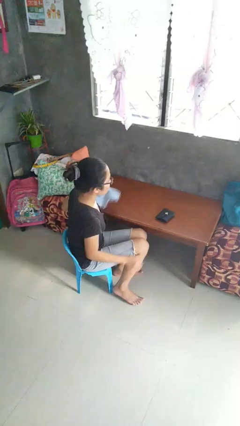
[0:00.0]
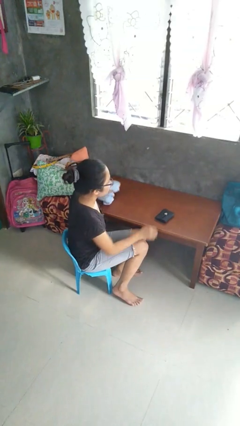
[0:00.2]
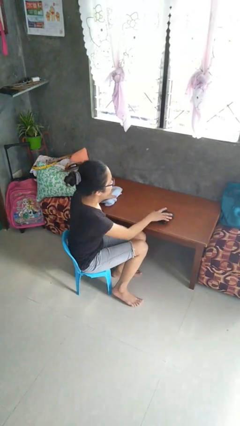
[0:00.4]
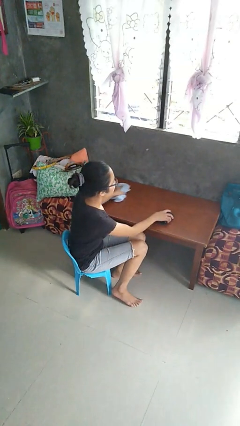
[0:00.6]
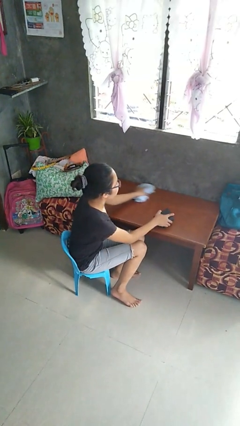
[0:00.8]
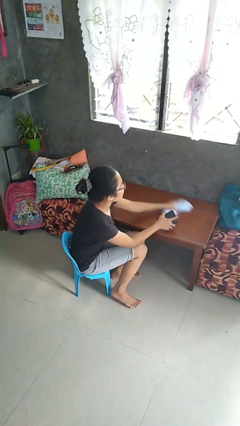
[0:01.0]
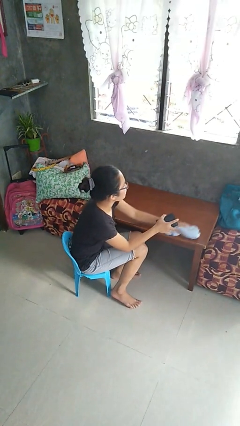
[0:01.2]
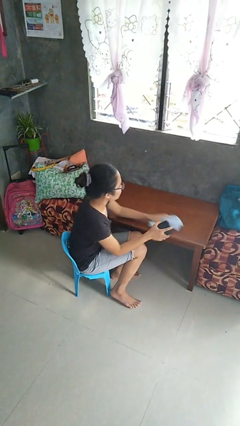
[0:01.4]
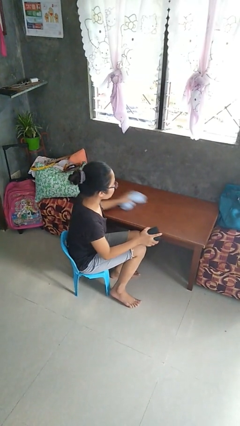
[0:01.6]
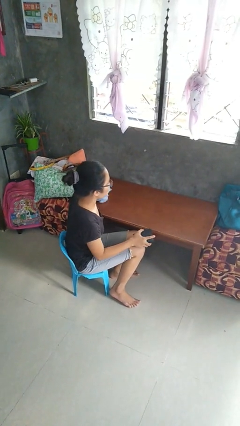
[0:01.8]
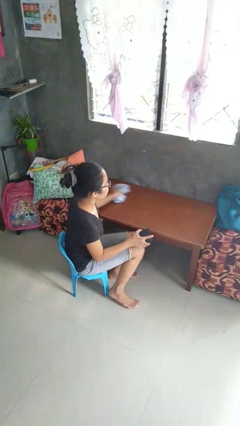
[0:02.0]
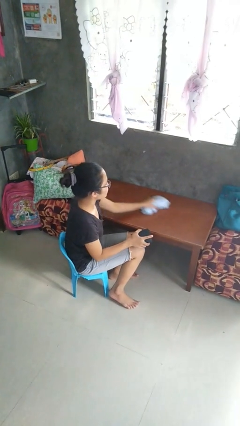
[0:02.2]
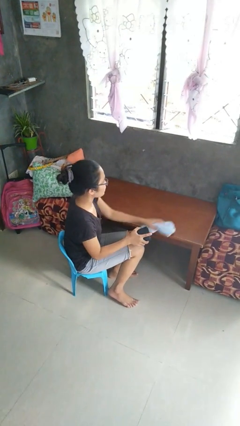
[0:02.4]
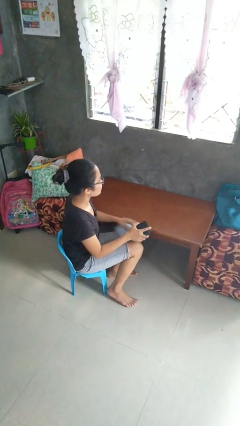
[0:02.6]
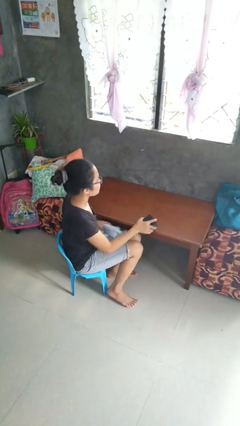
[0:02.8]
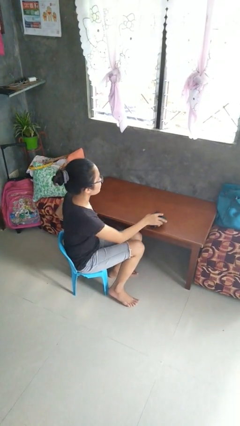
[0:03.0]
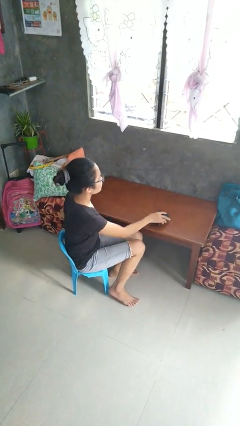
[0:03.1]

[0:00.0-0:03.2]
person cleans table with rag

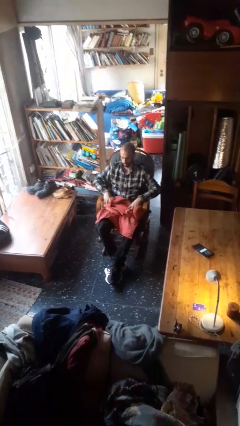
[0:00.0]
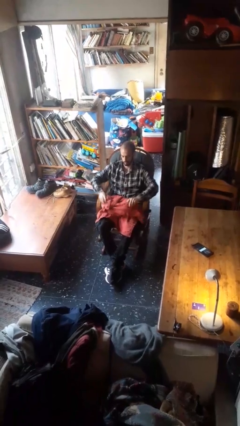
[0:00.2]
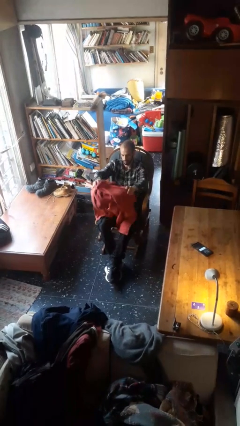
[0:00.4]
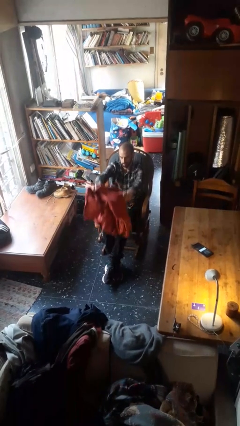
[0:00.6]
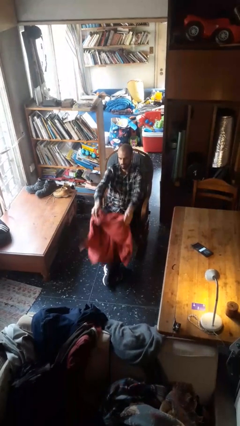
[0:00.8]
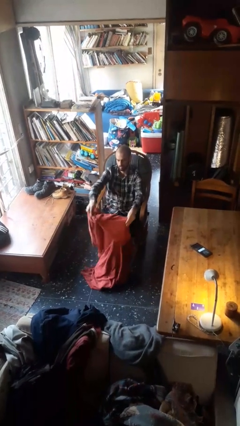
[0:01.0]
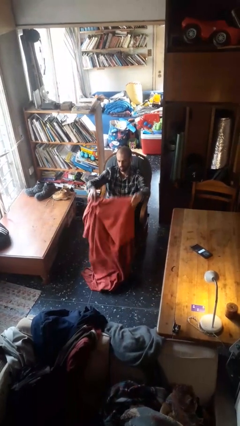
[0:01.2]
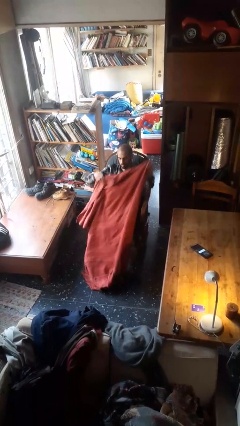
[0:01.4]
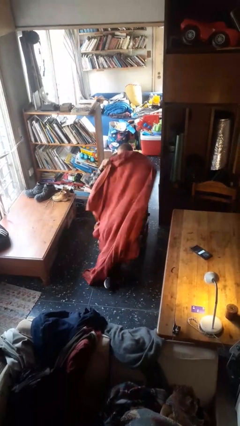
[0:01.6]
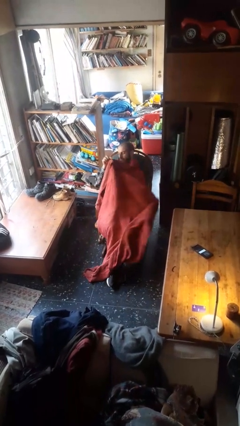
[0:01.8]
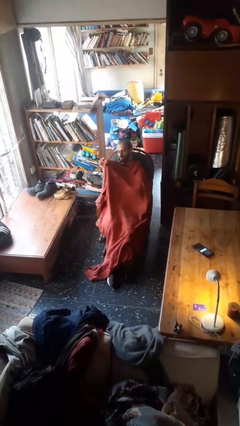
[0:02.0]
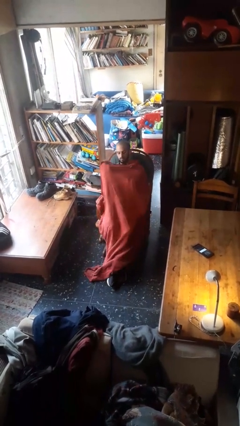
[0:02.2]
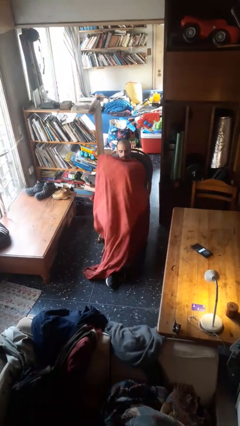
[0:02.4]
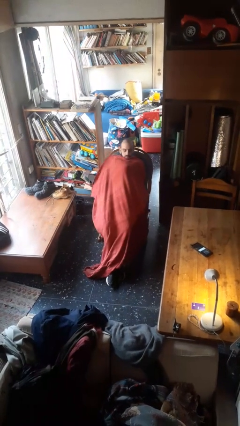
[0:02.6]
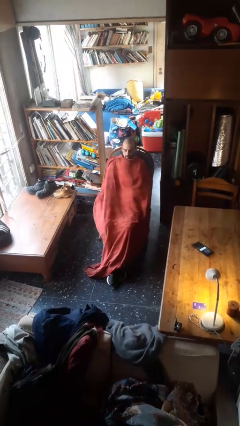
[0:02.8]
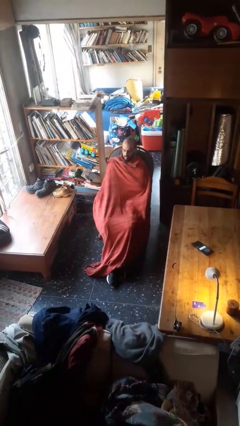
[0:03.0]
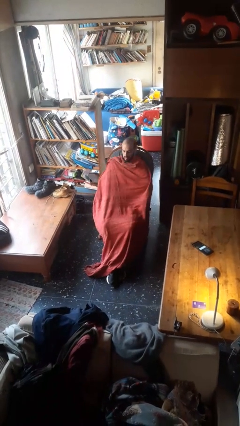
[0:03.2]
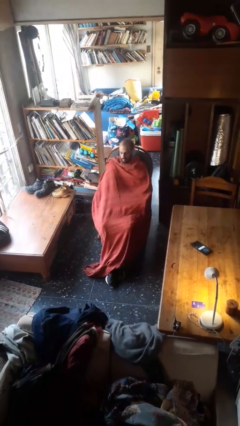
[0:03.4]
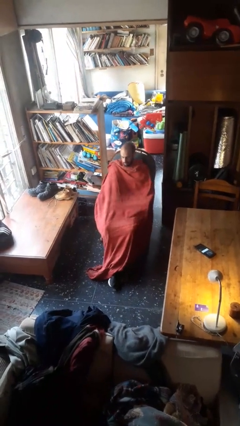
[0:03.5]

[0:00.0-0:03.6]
person covers with blanket

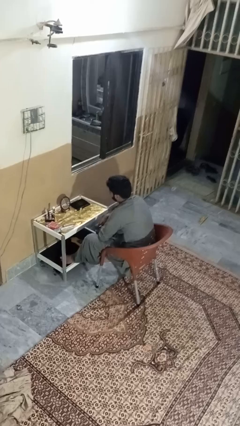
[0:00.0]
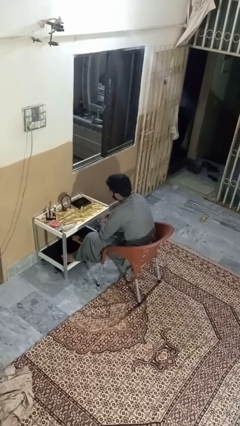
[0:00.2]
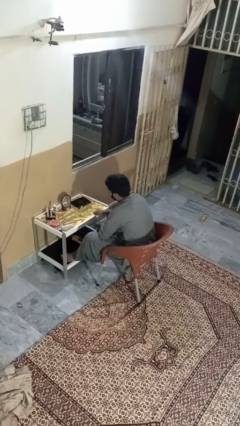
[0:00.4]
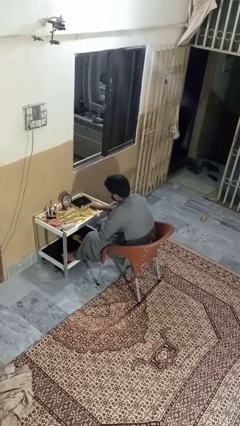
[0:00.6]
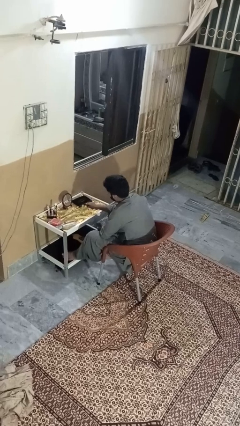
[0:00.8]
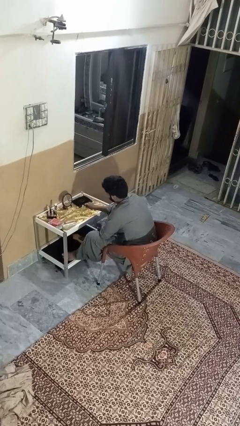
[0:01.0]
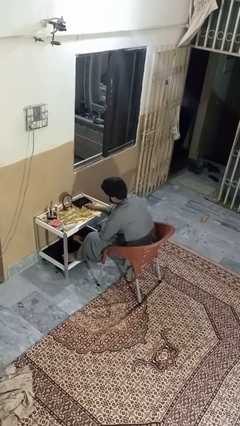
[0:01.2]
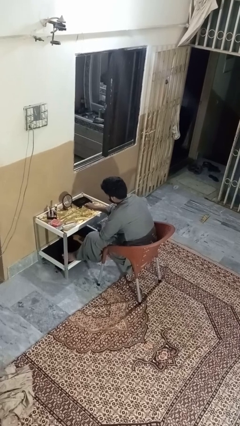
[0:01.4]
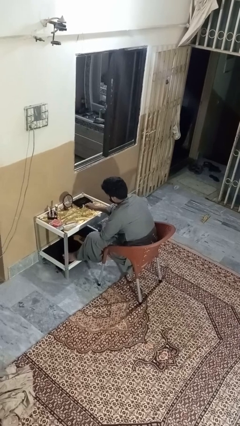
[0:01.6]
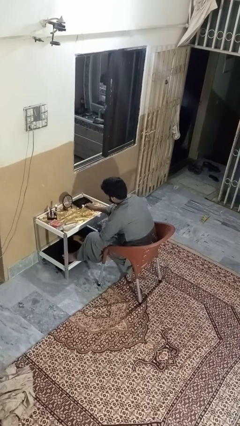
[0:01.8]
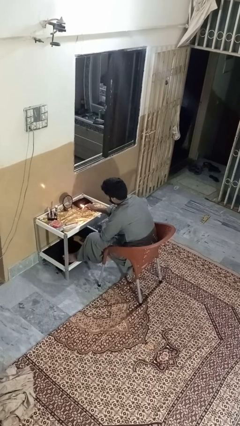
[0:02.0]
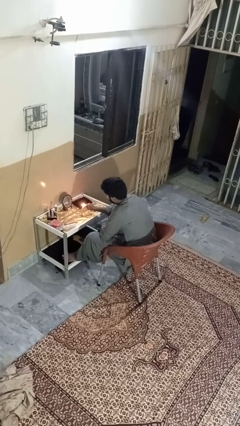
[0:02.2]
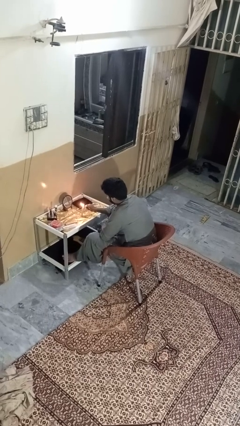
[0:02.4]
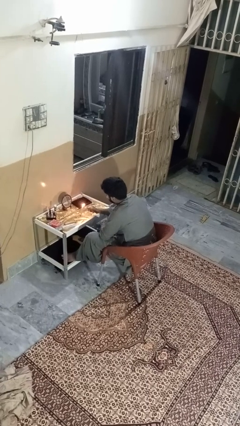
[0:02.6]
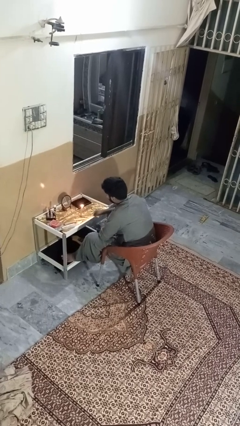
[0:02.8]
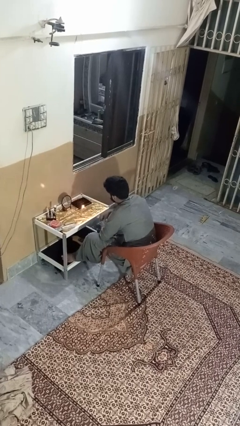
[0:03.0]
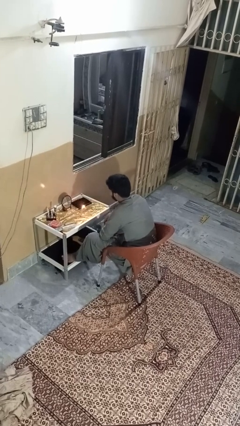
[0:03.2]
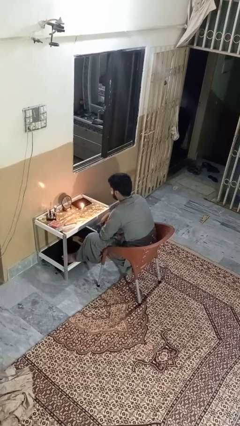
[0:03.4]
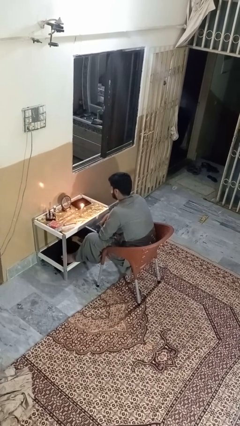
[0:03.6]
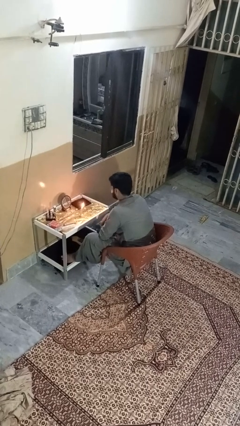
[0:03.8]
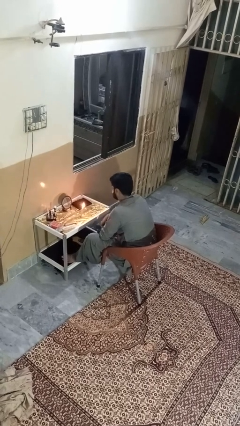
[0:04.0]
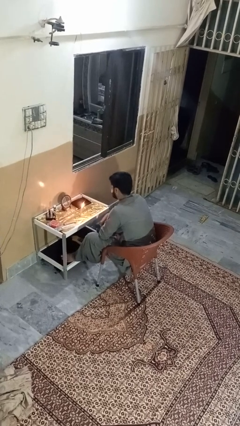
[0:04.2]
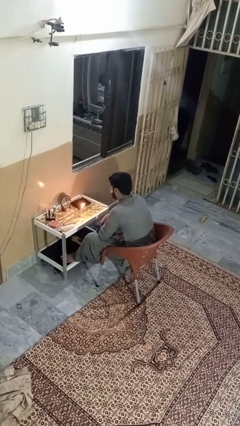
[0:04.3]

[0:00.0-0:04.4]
person lights candle

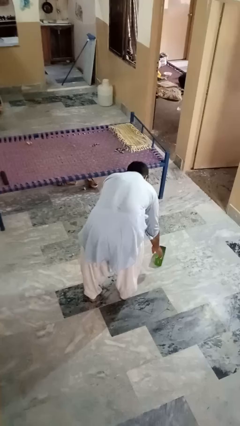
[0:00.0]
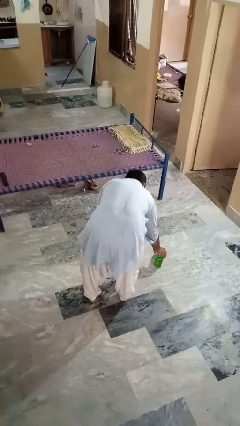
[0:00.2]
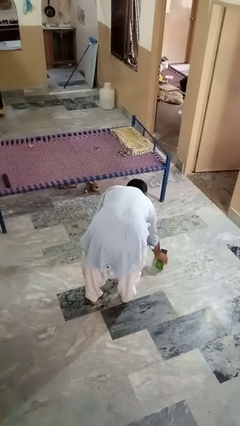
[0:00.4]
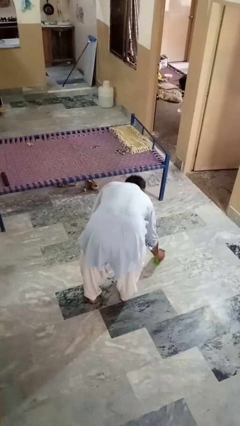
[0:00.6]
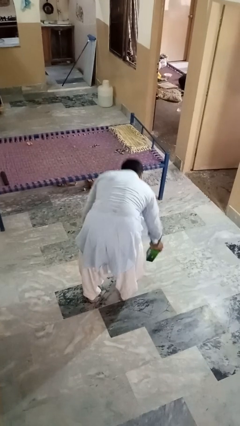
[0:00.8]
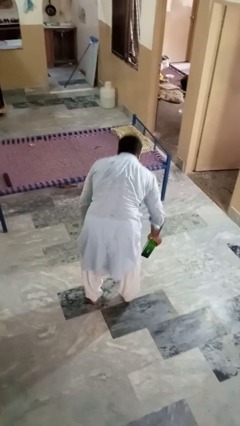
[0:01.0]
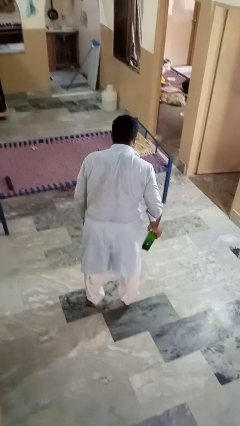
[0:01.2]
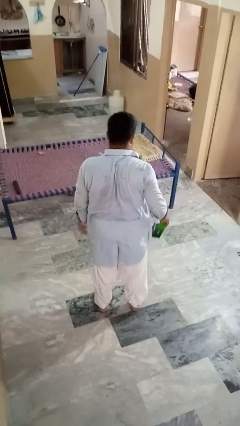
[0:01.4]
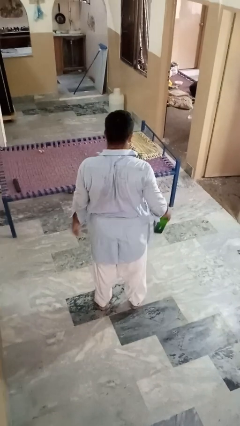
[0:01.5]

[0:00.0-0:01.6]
person picks up object from floor

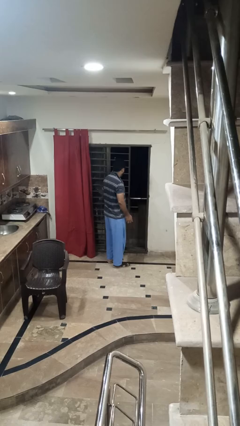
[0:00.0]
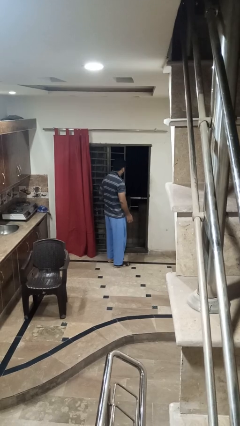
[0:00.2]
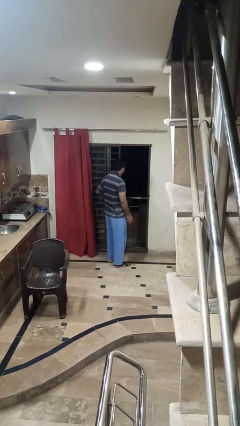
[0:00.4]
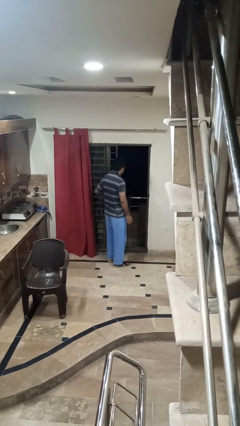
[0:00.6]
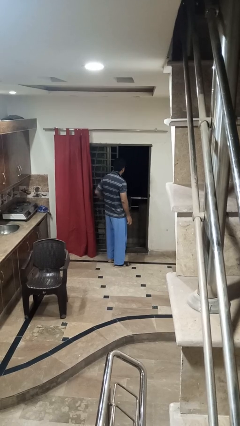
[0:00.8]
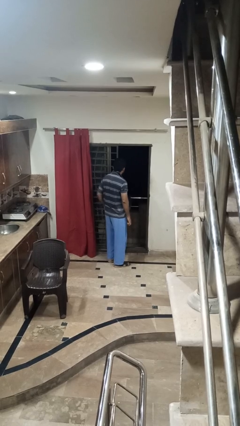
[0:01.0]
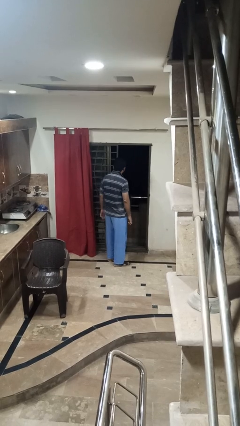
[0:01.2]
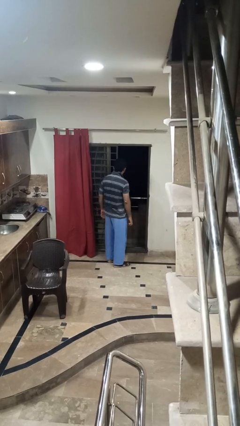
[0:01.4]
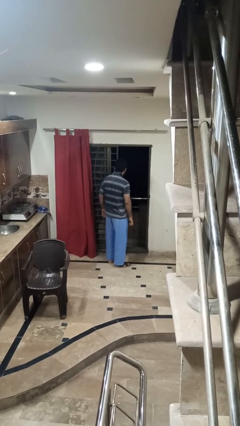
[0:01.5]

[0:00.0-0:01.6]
person opens facility door

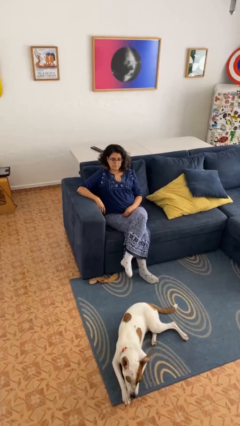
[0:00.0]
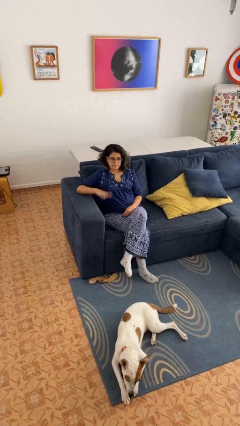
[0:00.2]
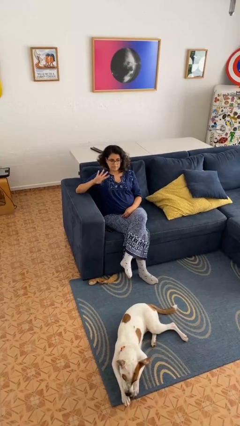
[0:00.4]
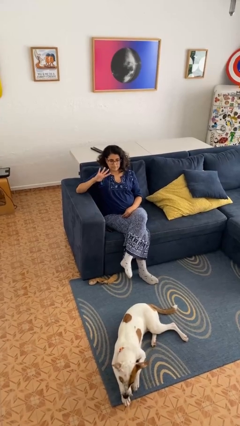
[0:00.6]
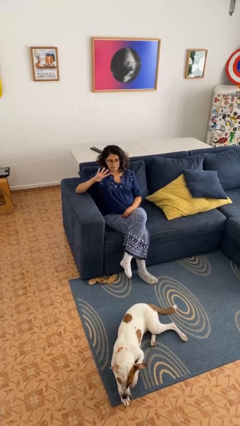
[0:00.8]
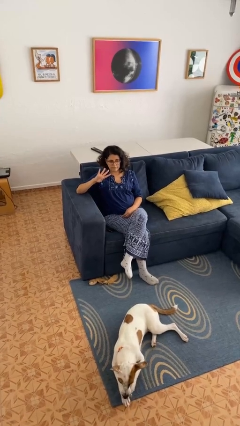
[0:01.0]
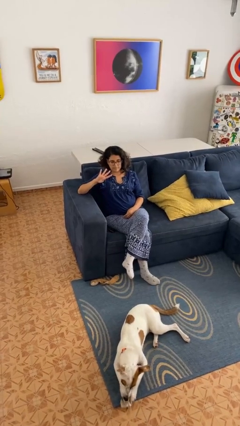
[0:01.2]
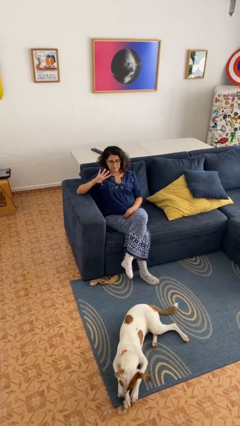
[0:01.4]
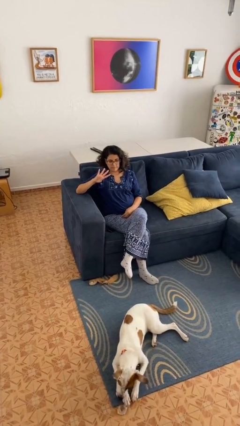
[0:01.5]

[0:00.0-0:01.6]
person gestures number four

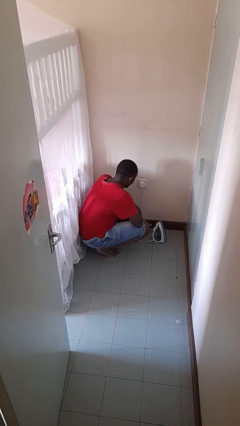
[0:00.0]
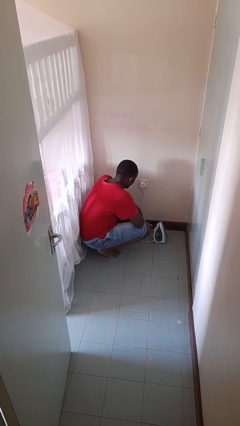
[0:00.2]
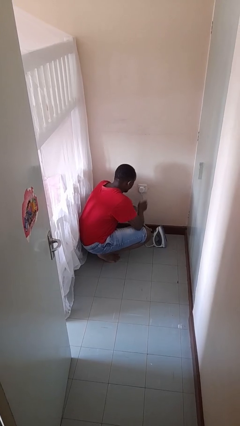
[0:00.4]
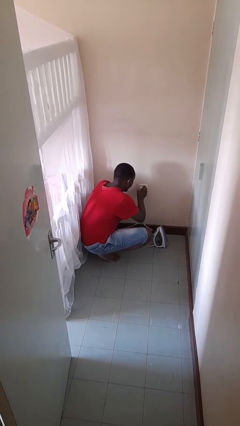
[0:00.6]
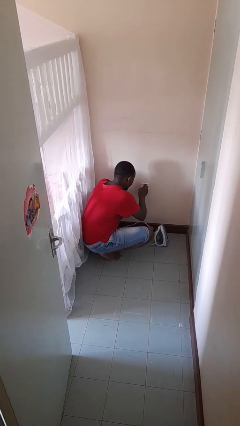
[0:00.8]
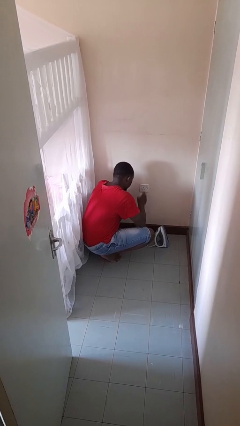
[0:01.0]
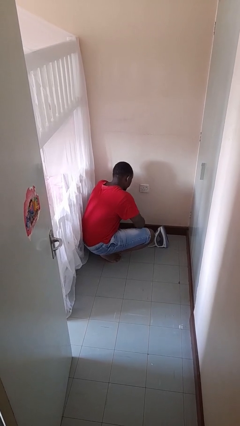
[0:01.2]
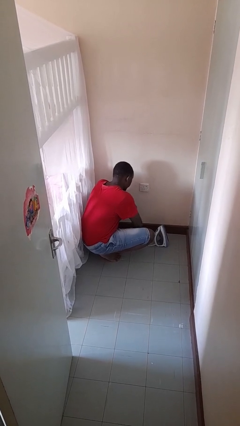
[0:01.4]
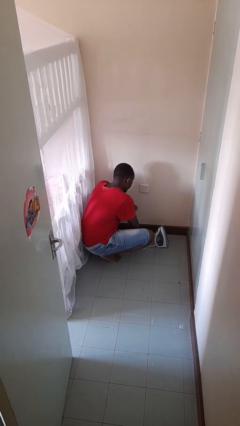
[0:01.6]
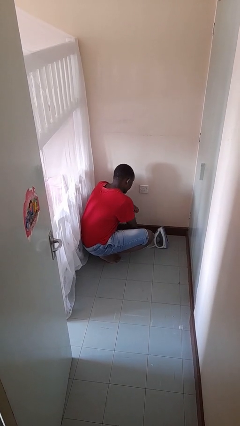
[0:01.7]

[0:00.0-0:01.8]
person unplugs from electrical socket
